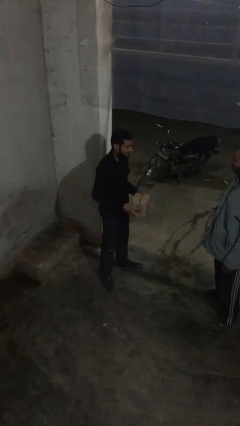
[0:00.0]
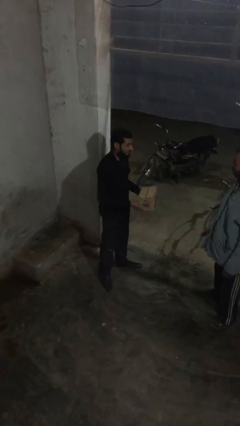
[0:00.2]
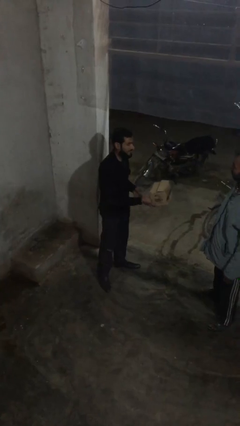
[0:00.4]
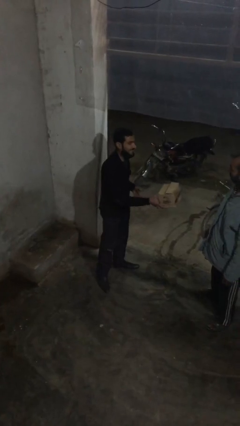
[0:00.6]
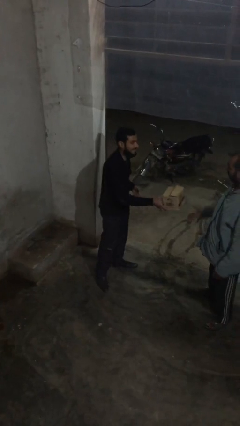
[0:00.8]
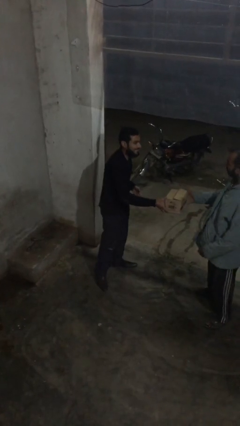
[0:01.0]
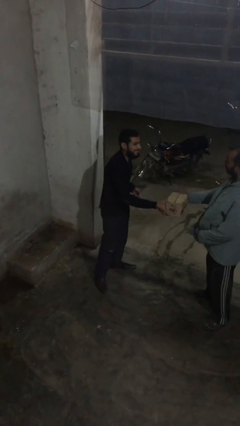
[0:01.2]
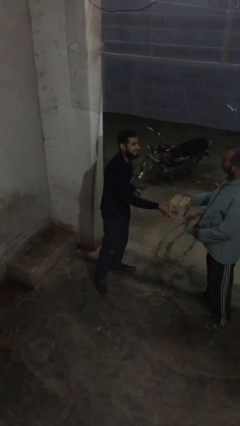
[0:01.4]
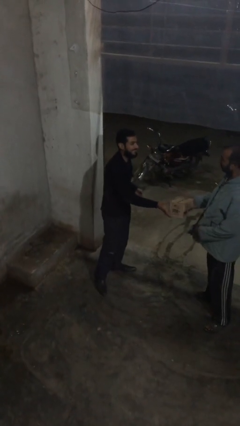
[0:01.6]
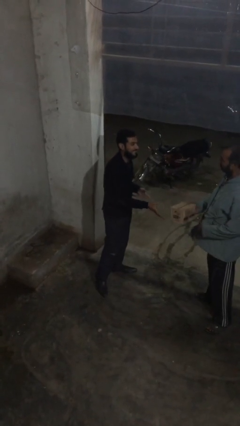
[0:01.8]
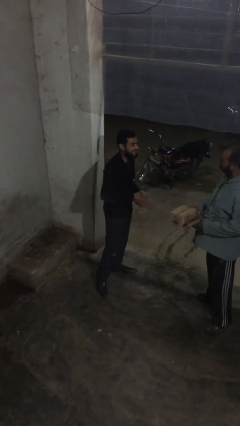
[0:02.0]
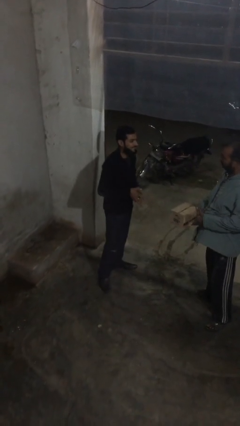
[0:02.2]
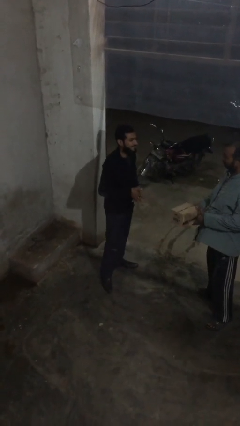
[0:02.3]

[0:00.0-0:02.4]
person transfers object to person

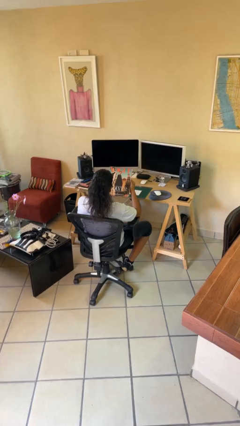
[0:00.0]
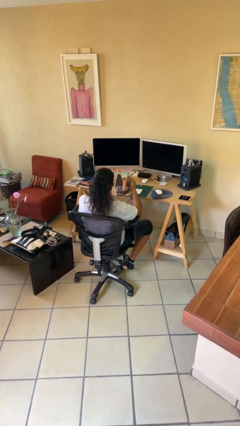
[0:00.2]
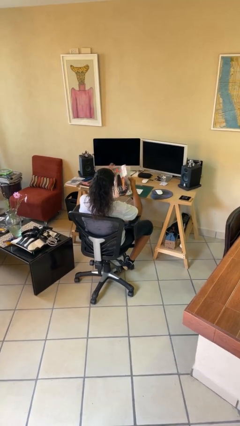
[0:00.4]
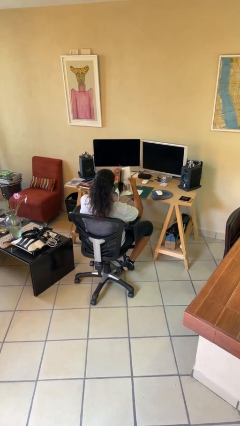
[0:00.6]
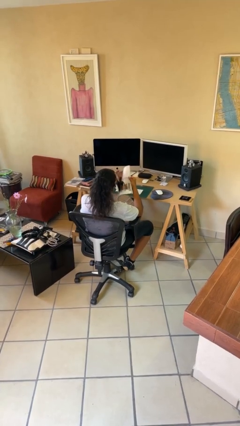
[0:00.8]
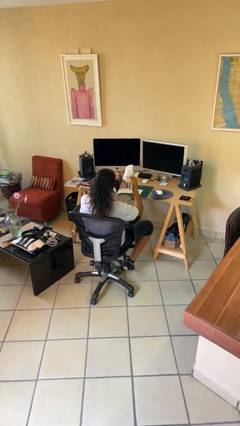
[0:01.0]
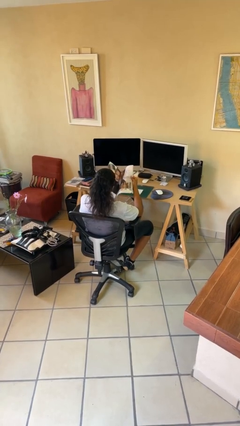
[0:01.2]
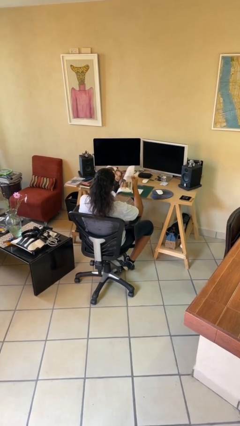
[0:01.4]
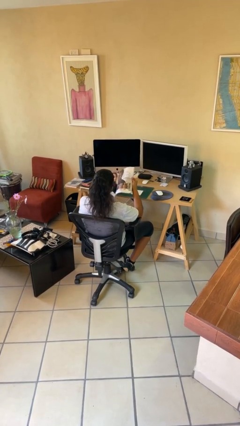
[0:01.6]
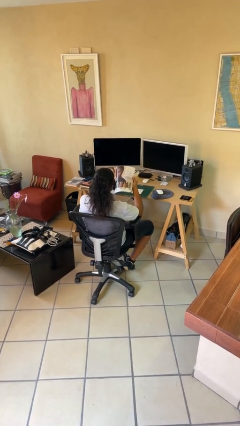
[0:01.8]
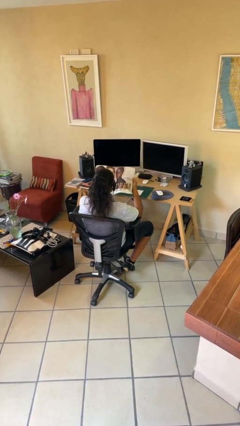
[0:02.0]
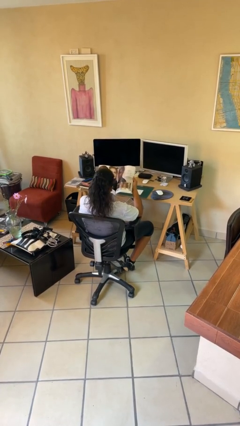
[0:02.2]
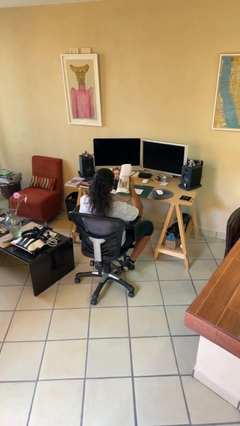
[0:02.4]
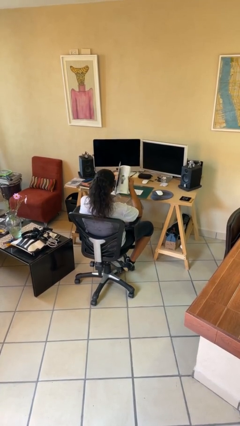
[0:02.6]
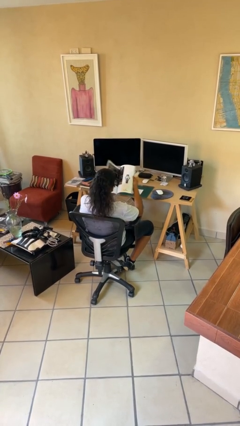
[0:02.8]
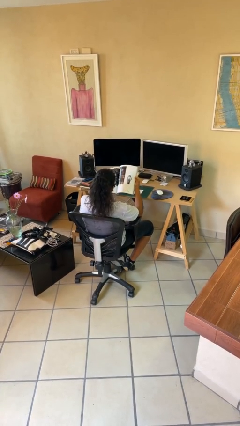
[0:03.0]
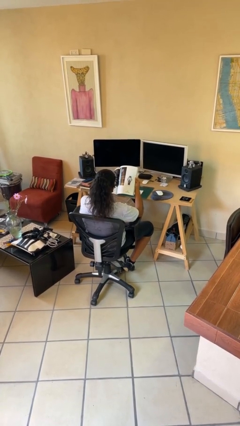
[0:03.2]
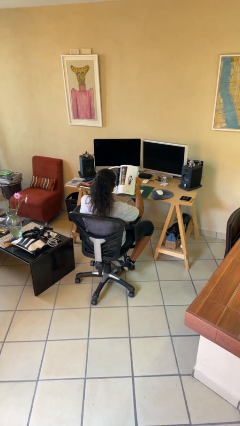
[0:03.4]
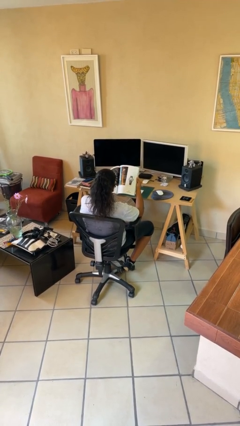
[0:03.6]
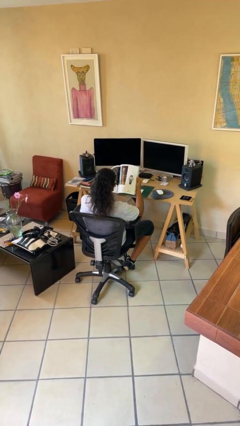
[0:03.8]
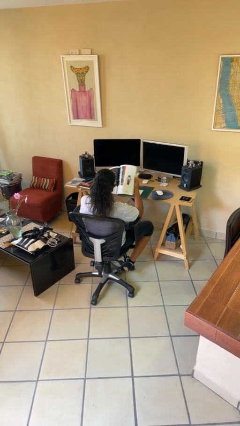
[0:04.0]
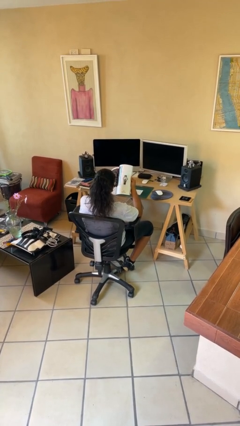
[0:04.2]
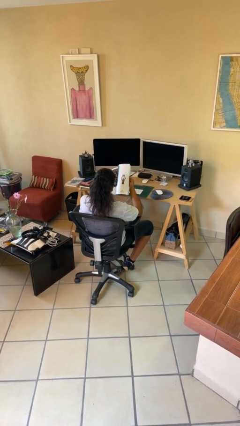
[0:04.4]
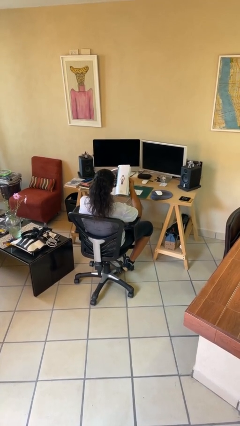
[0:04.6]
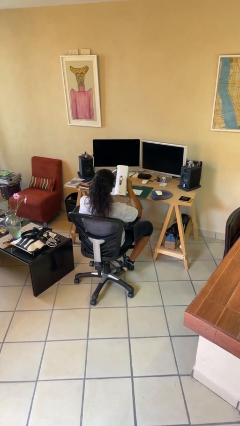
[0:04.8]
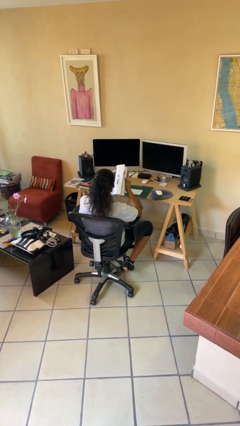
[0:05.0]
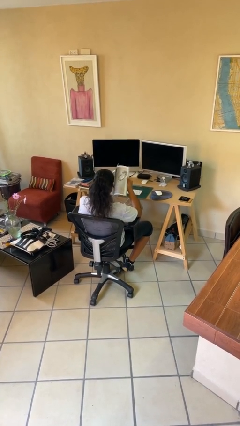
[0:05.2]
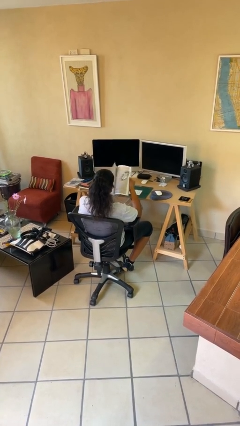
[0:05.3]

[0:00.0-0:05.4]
person reads magazine

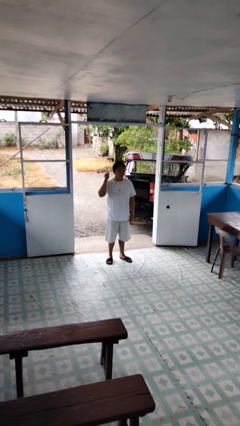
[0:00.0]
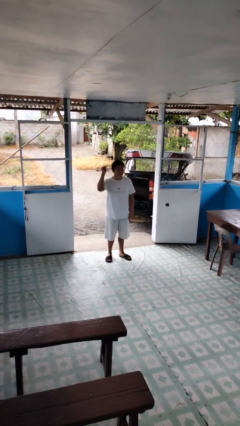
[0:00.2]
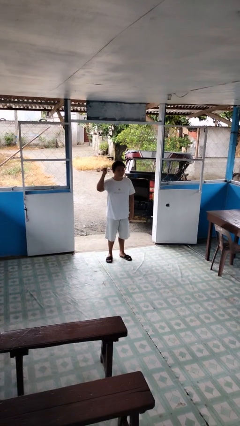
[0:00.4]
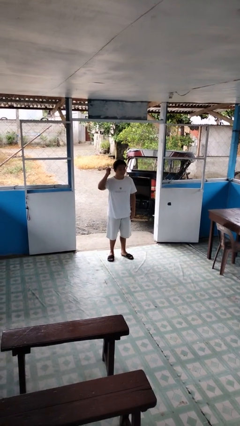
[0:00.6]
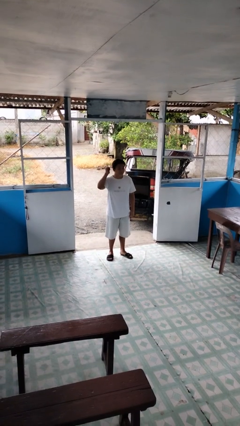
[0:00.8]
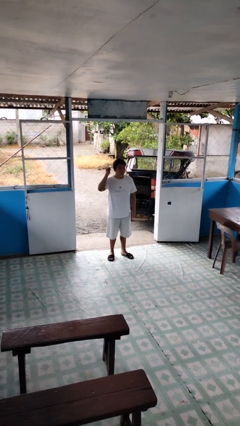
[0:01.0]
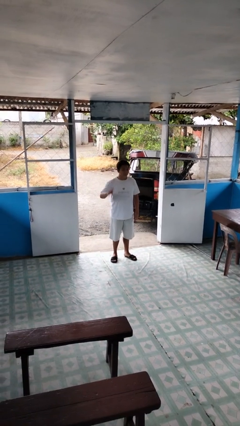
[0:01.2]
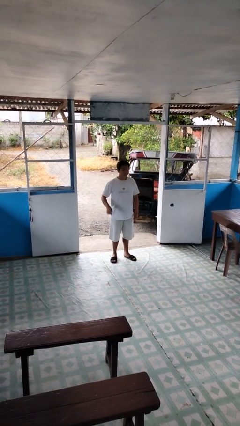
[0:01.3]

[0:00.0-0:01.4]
person gestures behind me

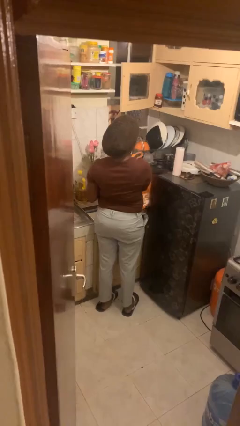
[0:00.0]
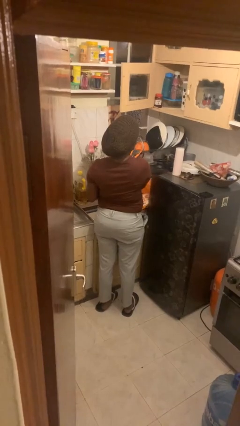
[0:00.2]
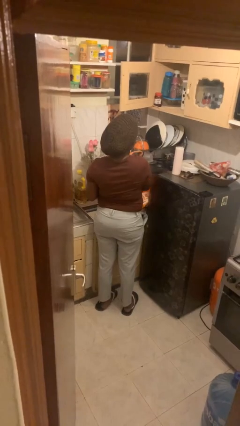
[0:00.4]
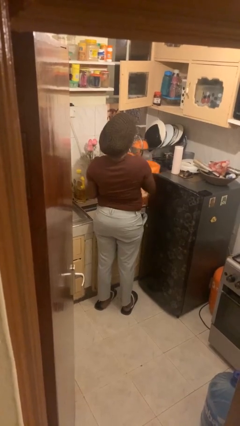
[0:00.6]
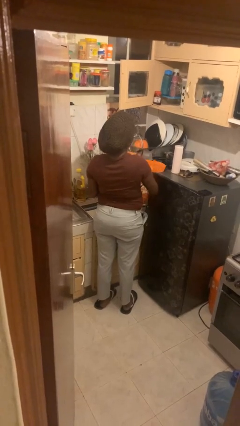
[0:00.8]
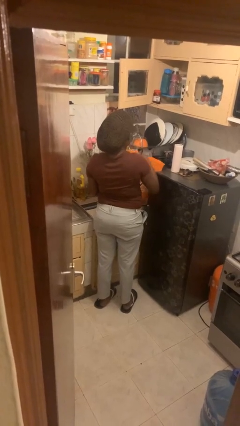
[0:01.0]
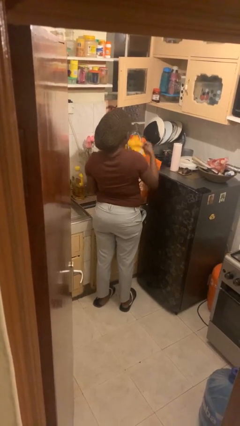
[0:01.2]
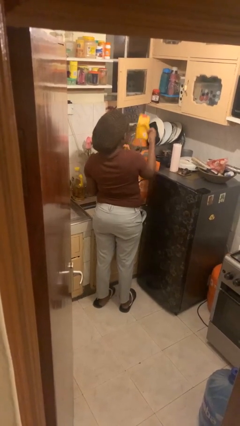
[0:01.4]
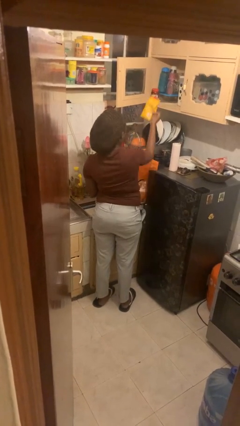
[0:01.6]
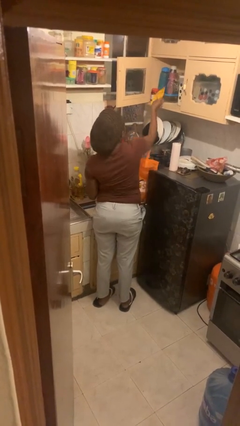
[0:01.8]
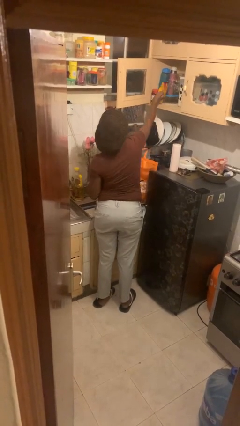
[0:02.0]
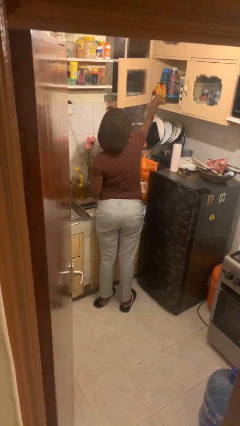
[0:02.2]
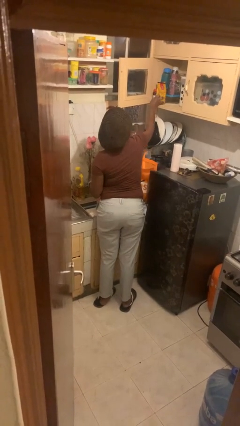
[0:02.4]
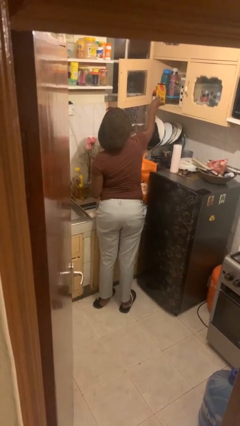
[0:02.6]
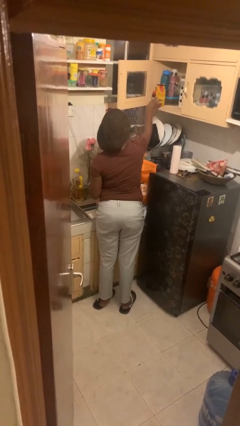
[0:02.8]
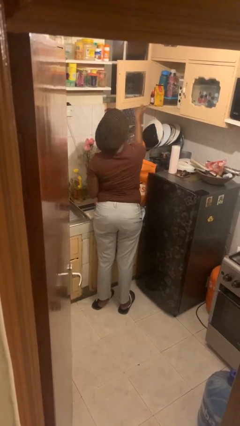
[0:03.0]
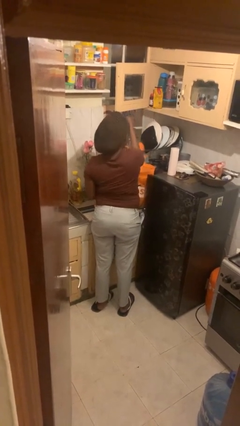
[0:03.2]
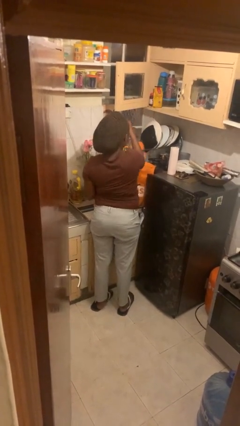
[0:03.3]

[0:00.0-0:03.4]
person loads groceries into cabinet

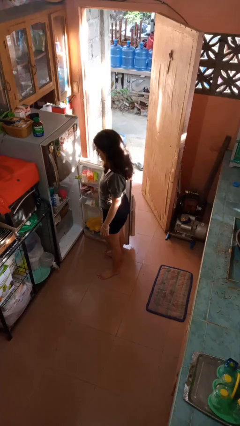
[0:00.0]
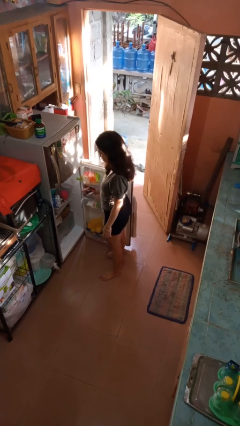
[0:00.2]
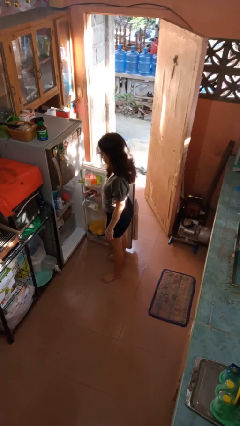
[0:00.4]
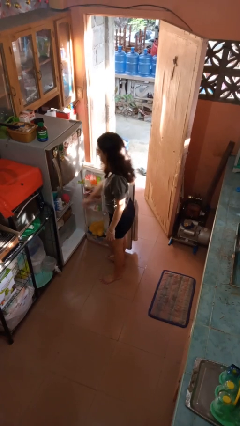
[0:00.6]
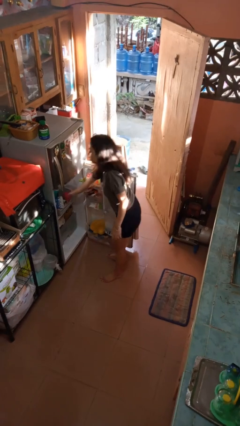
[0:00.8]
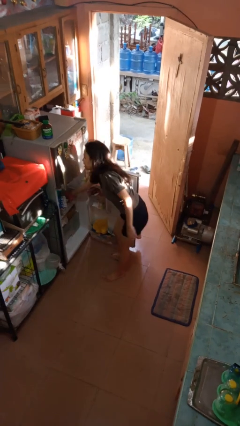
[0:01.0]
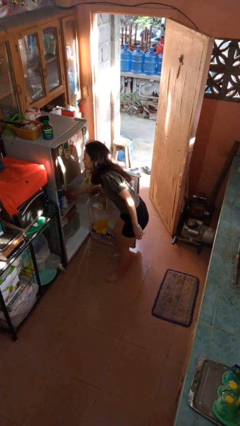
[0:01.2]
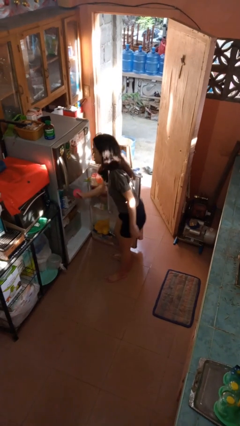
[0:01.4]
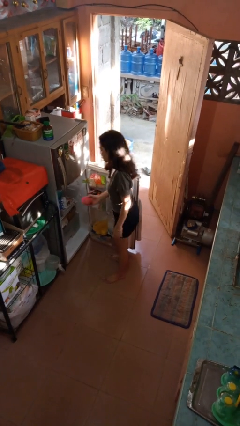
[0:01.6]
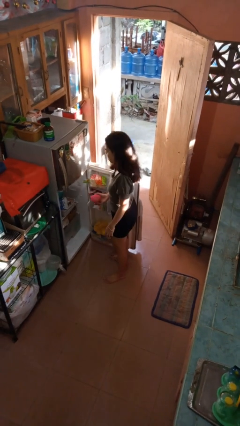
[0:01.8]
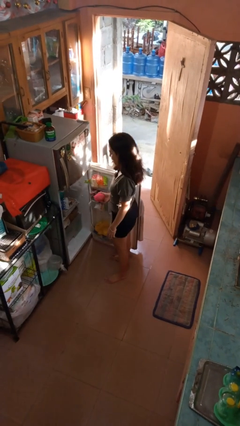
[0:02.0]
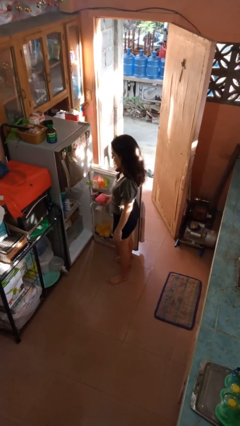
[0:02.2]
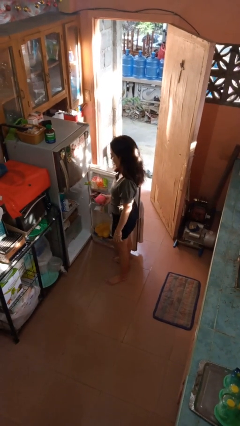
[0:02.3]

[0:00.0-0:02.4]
person takes object from refrigerator

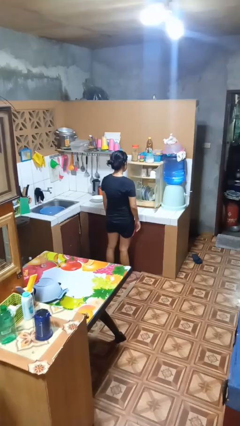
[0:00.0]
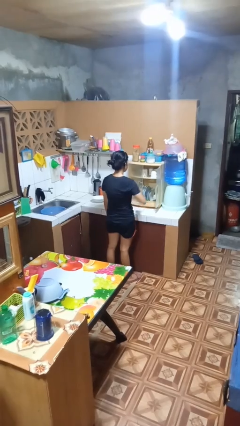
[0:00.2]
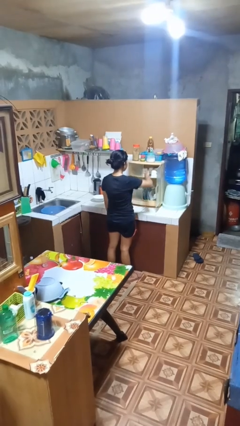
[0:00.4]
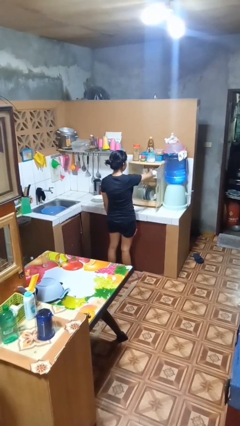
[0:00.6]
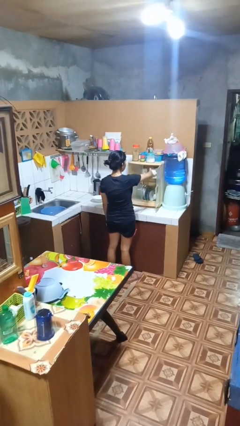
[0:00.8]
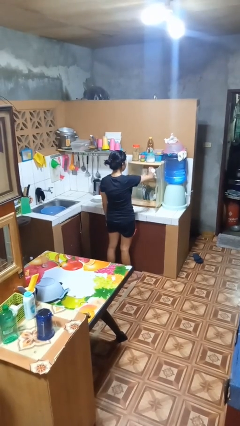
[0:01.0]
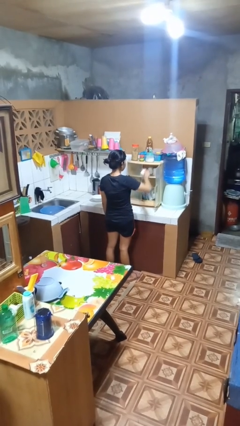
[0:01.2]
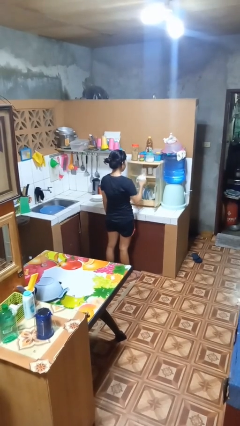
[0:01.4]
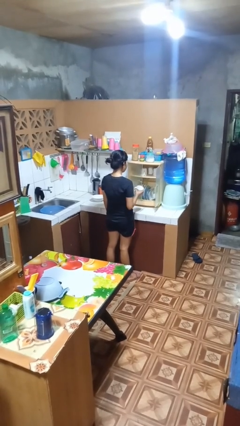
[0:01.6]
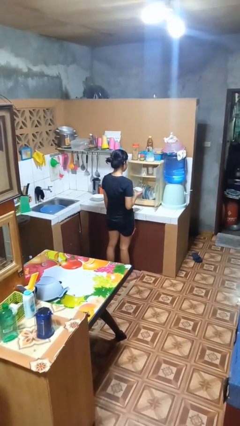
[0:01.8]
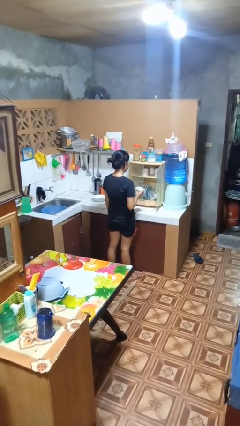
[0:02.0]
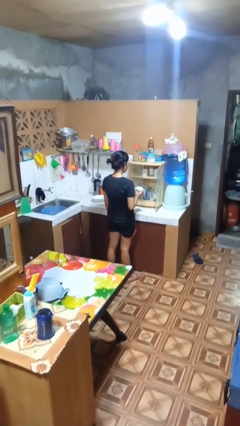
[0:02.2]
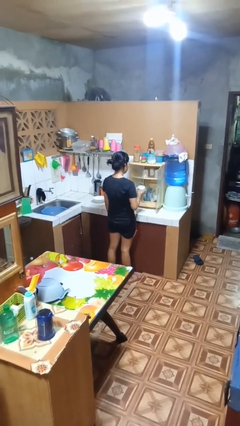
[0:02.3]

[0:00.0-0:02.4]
person takes object from kitchen drawer
